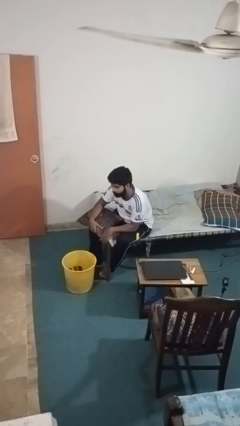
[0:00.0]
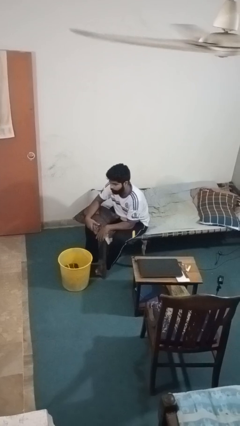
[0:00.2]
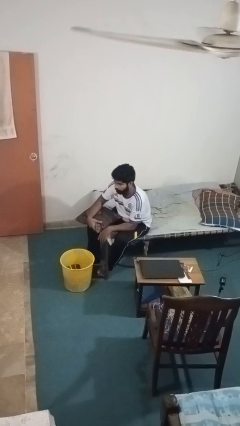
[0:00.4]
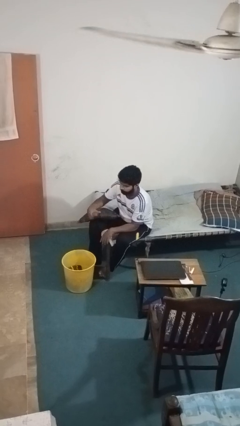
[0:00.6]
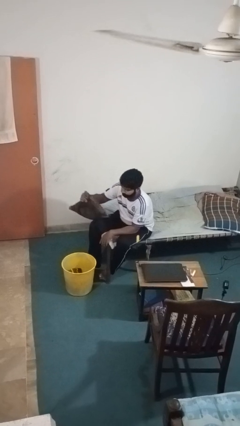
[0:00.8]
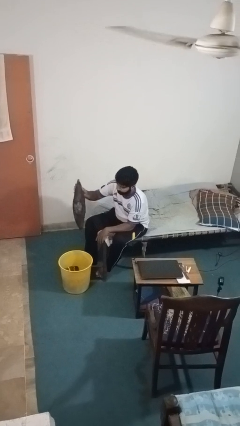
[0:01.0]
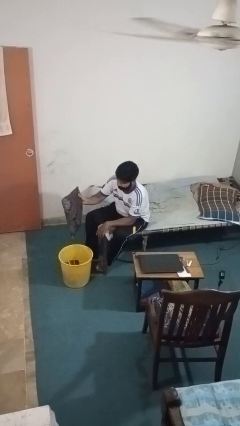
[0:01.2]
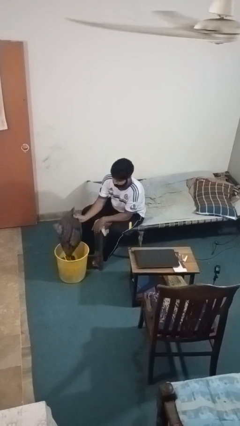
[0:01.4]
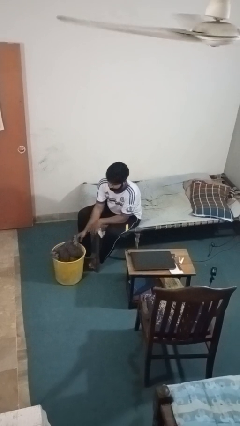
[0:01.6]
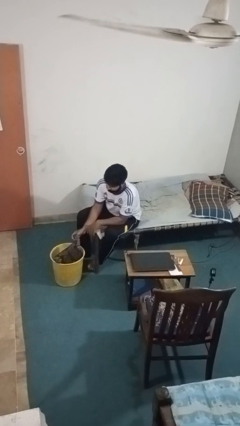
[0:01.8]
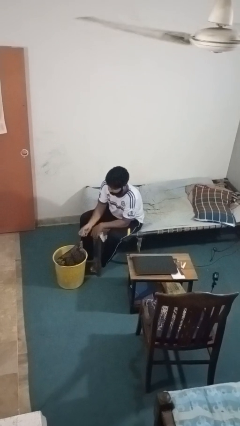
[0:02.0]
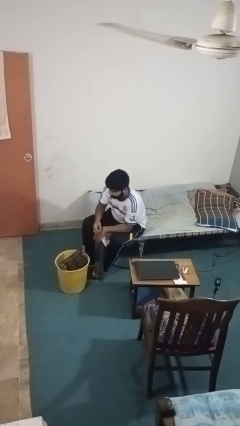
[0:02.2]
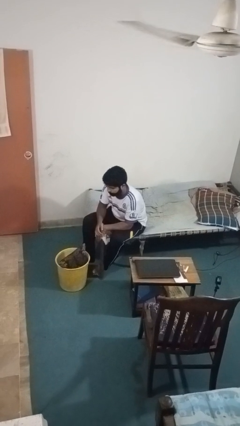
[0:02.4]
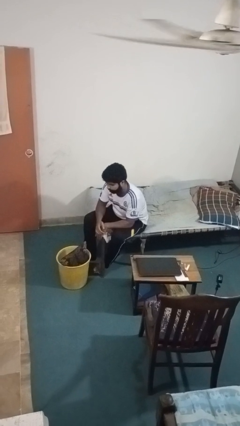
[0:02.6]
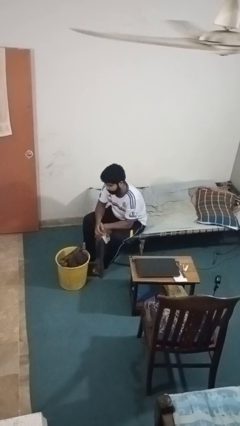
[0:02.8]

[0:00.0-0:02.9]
person puts object into basket

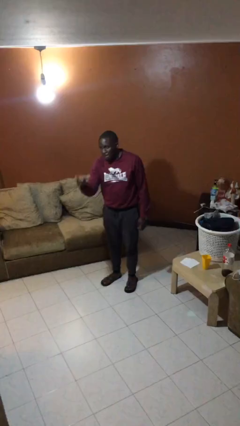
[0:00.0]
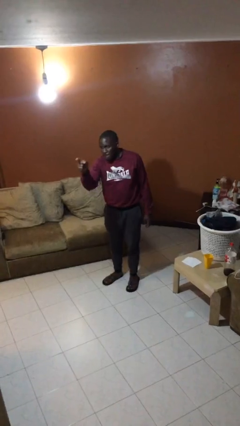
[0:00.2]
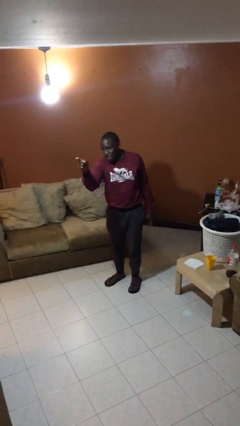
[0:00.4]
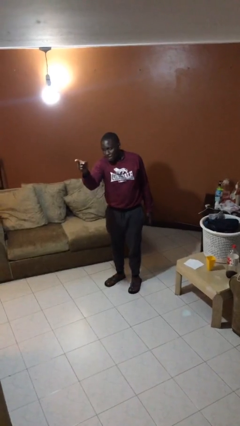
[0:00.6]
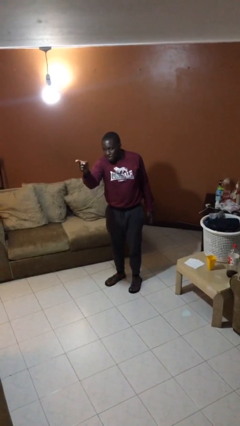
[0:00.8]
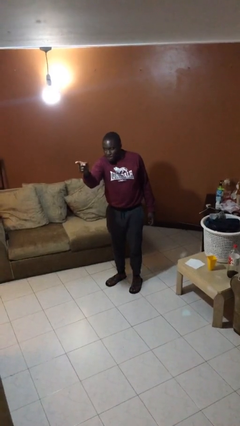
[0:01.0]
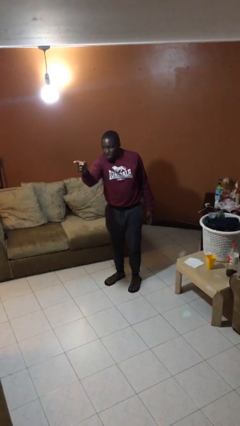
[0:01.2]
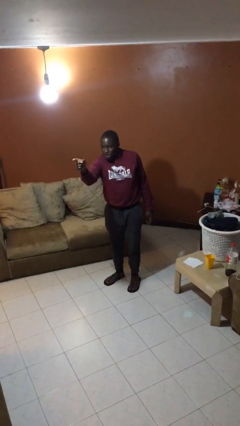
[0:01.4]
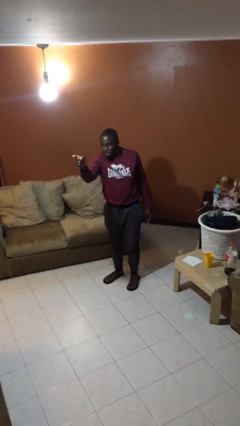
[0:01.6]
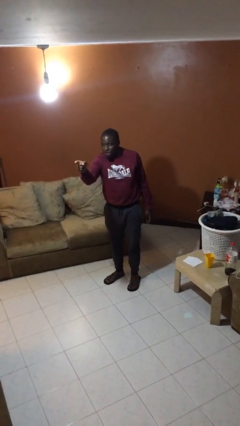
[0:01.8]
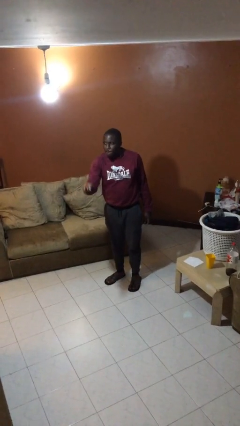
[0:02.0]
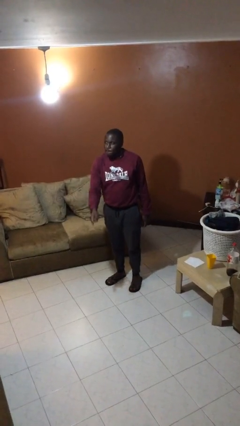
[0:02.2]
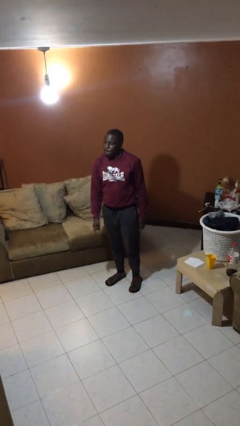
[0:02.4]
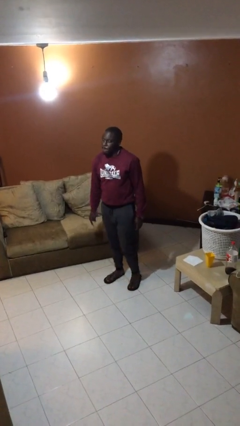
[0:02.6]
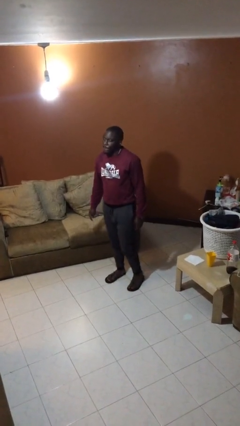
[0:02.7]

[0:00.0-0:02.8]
person points at person

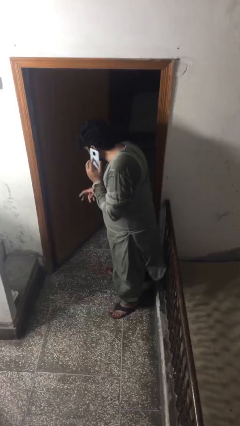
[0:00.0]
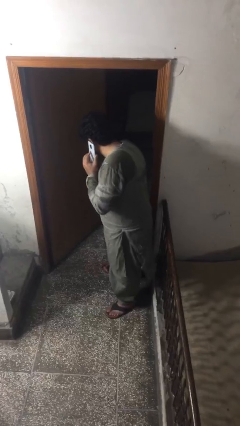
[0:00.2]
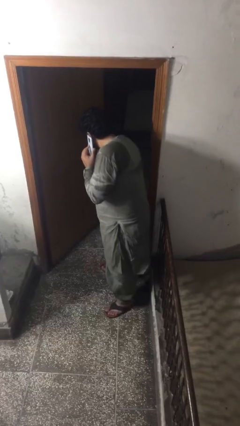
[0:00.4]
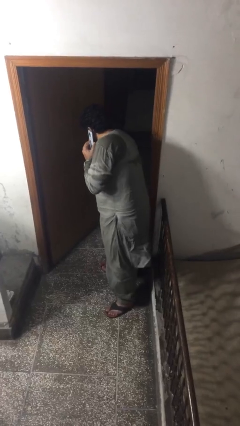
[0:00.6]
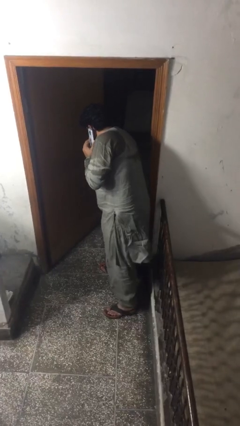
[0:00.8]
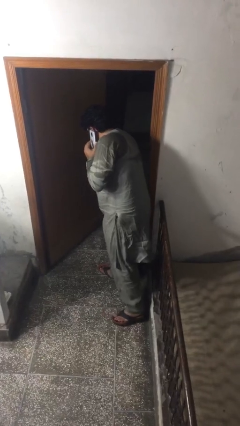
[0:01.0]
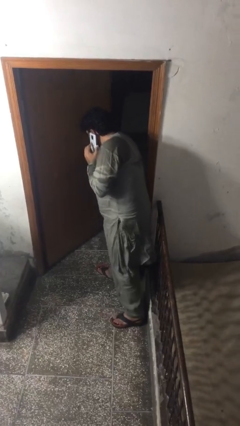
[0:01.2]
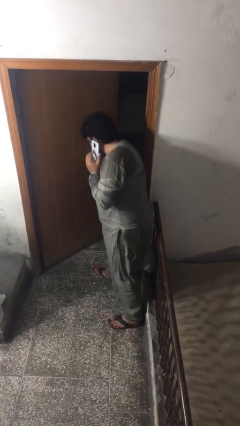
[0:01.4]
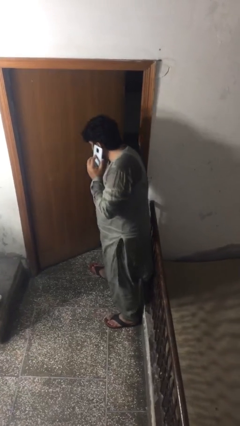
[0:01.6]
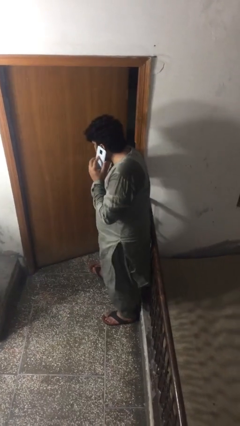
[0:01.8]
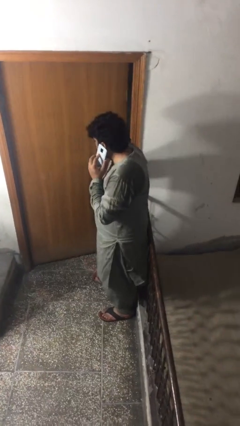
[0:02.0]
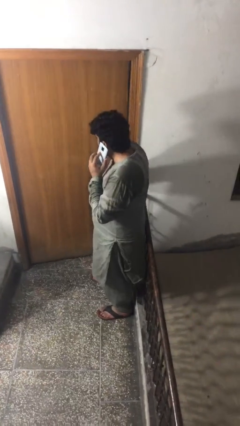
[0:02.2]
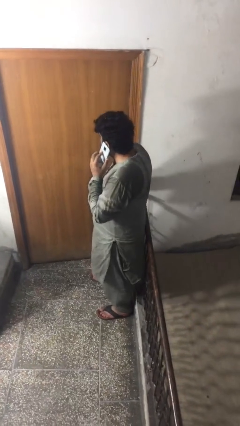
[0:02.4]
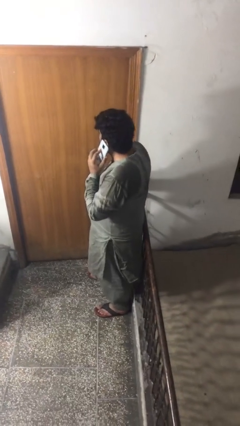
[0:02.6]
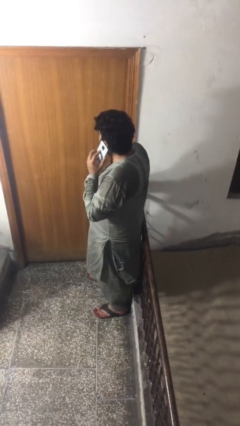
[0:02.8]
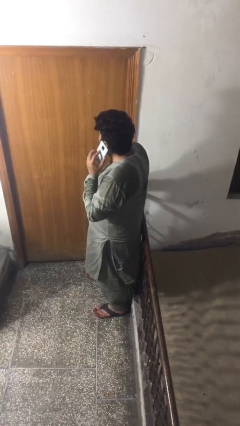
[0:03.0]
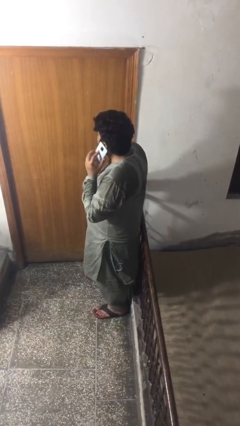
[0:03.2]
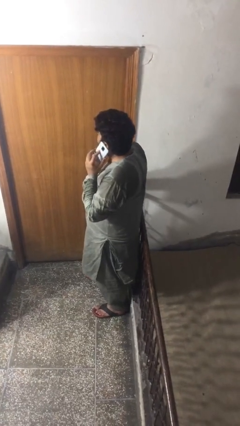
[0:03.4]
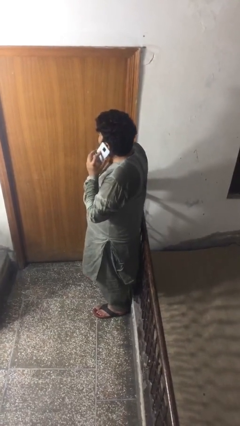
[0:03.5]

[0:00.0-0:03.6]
person closes facility door

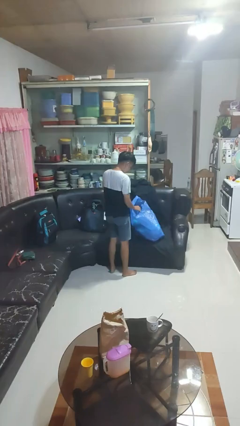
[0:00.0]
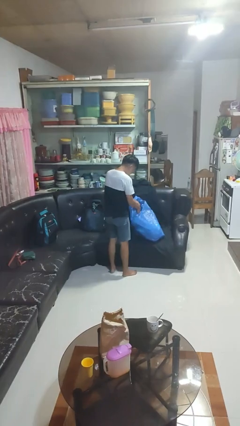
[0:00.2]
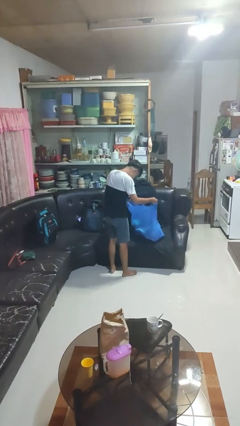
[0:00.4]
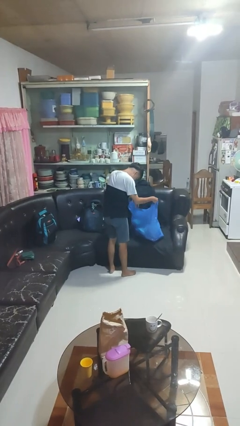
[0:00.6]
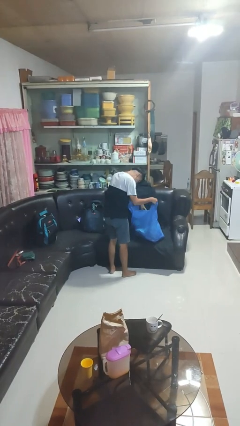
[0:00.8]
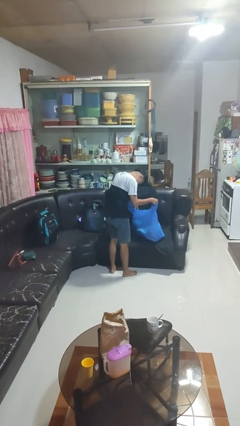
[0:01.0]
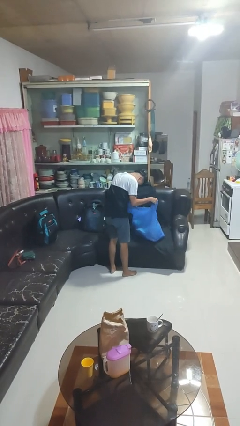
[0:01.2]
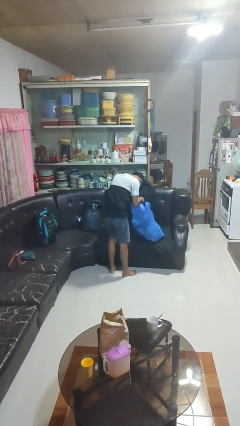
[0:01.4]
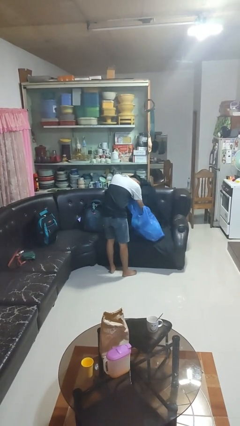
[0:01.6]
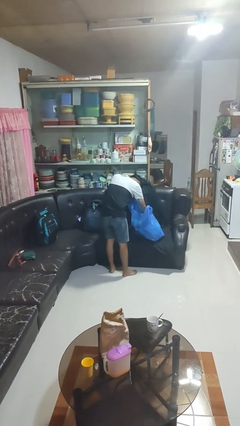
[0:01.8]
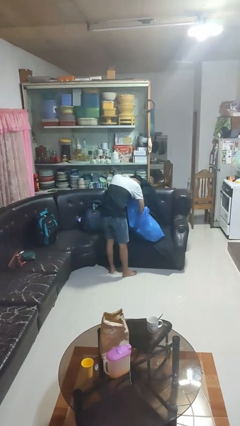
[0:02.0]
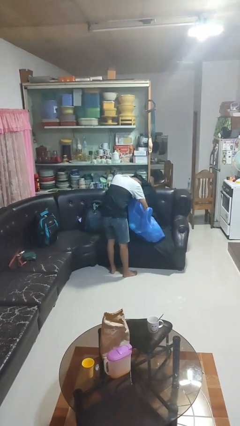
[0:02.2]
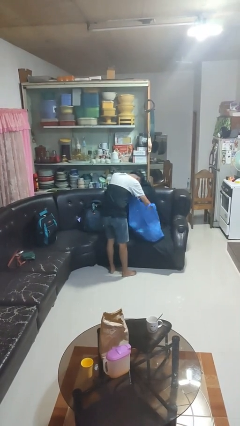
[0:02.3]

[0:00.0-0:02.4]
person searches in bag

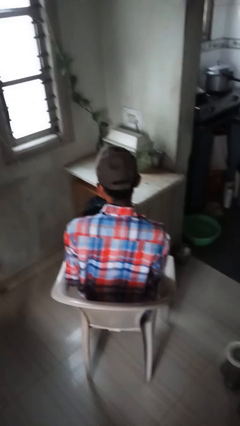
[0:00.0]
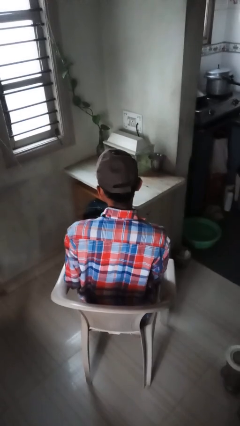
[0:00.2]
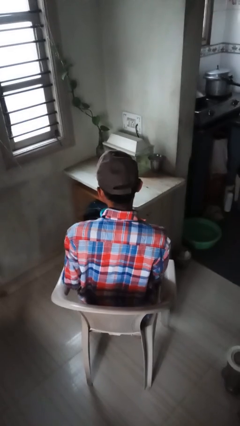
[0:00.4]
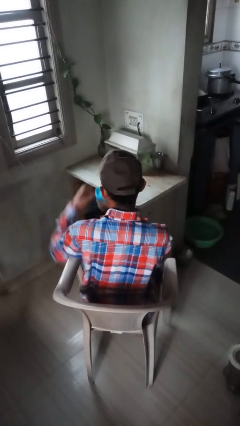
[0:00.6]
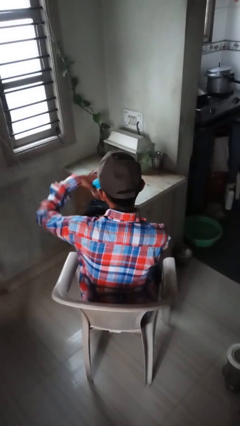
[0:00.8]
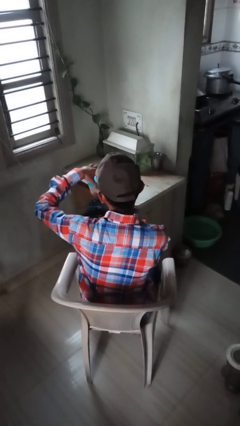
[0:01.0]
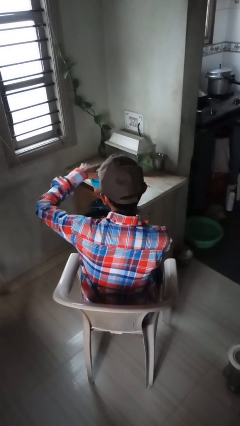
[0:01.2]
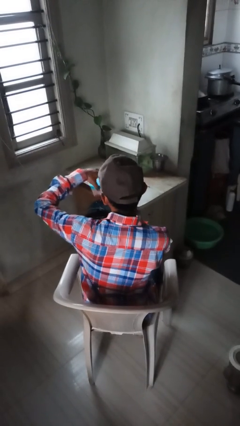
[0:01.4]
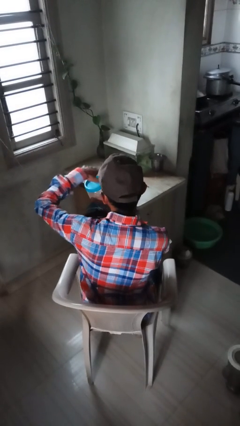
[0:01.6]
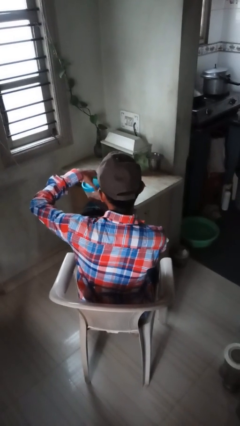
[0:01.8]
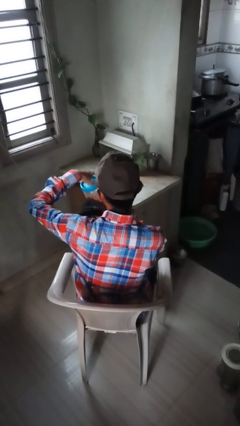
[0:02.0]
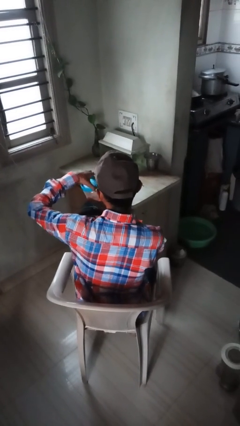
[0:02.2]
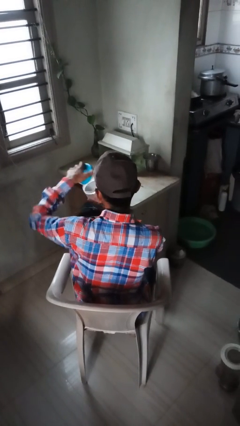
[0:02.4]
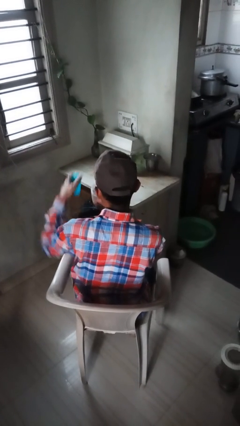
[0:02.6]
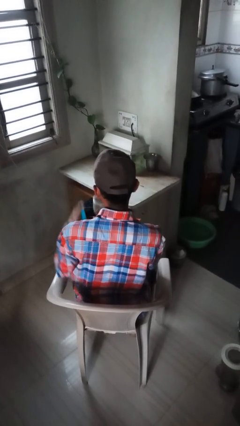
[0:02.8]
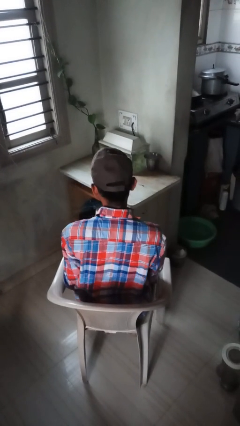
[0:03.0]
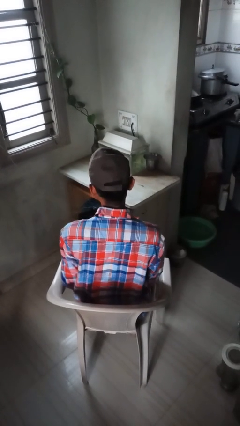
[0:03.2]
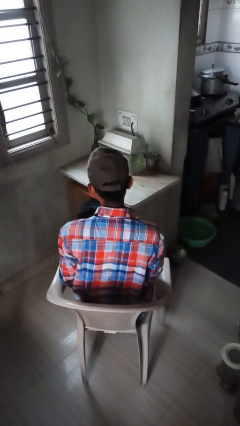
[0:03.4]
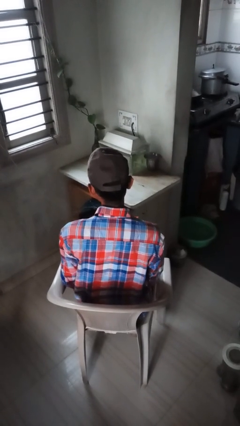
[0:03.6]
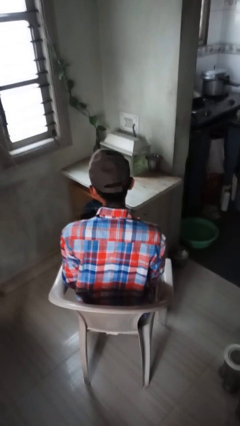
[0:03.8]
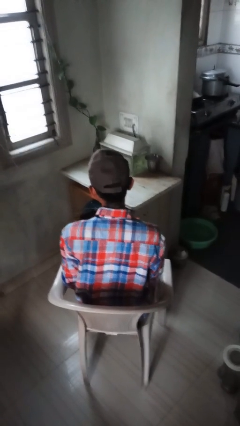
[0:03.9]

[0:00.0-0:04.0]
person opens jar

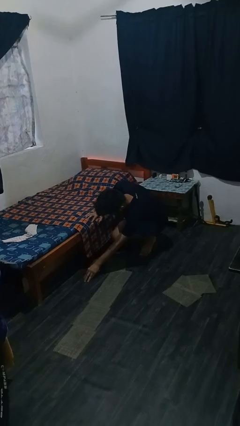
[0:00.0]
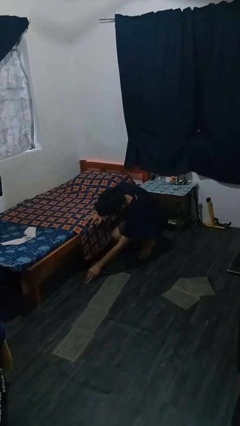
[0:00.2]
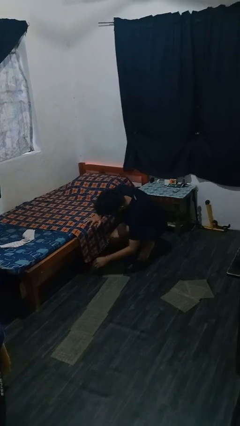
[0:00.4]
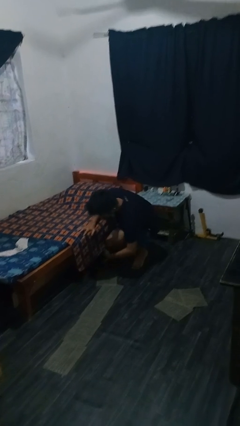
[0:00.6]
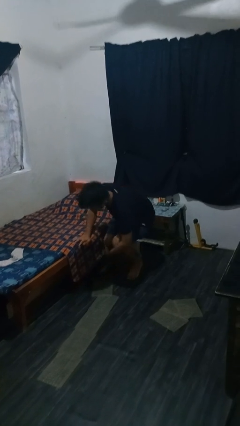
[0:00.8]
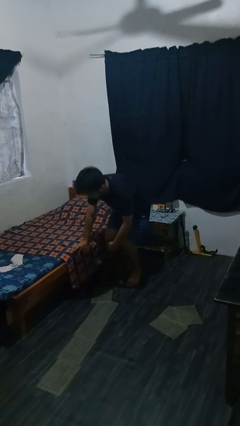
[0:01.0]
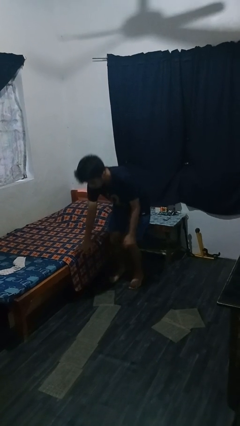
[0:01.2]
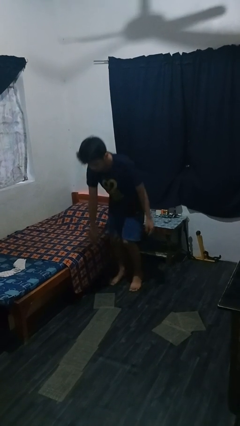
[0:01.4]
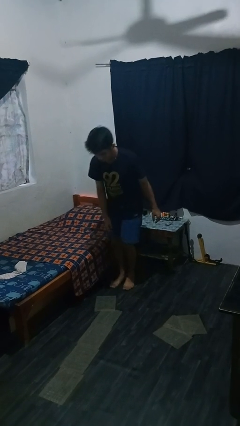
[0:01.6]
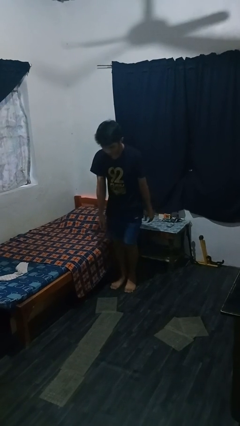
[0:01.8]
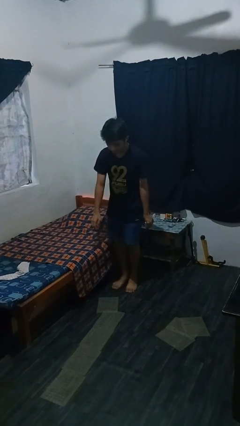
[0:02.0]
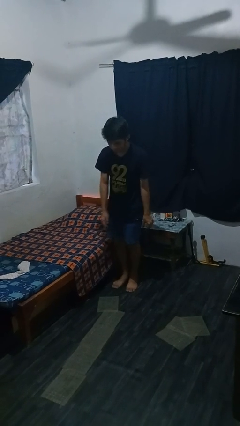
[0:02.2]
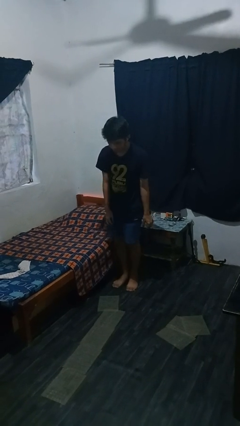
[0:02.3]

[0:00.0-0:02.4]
person stands up from floor
